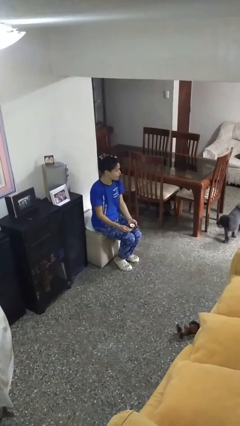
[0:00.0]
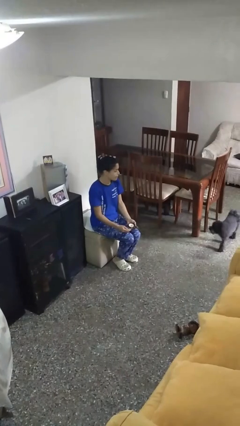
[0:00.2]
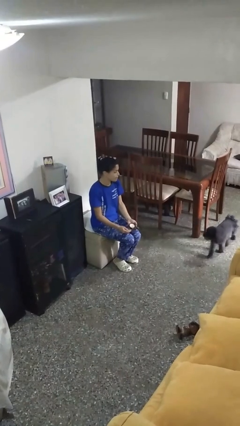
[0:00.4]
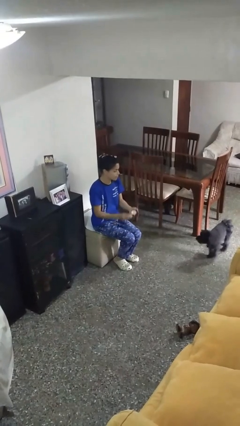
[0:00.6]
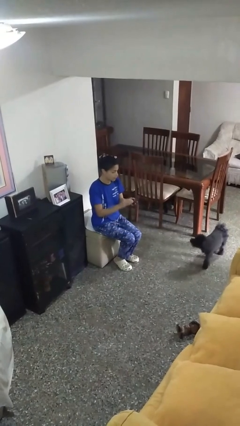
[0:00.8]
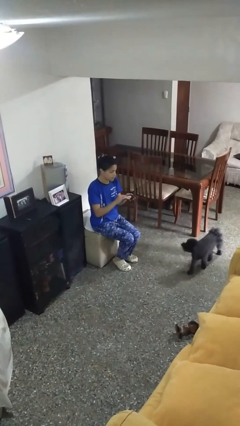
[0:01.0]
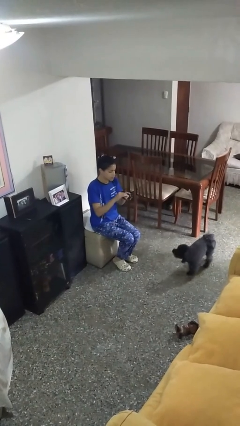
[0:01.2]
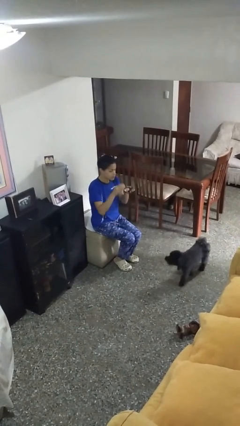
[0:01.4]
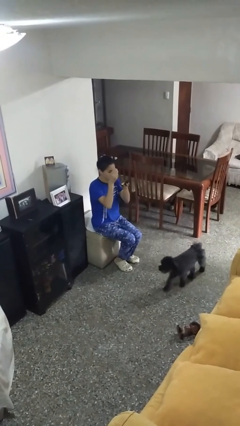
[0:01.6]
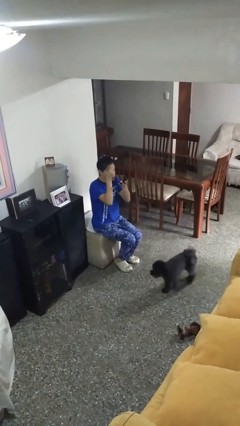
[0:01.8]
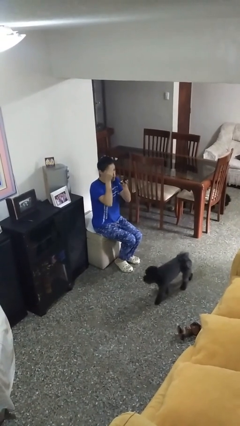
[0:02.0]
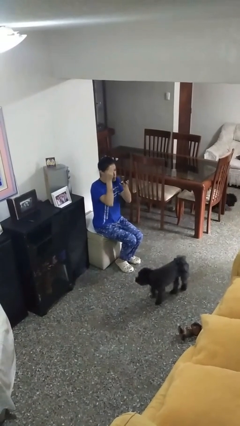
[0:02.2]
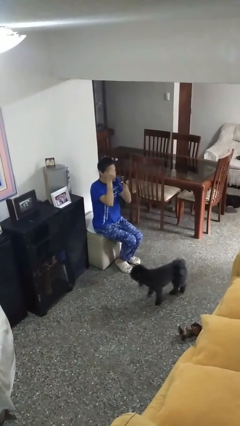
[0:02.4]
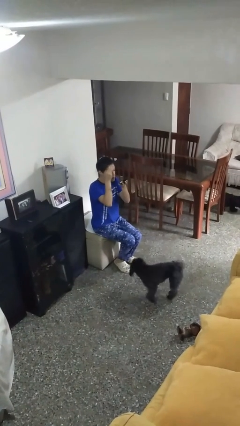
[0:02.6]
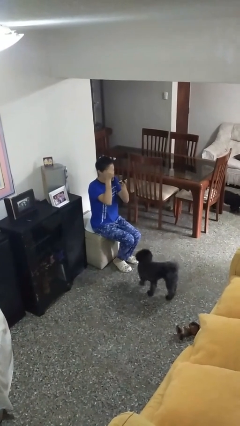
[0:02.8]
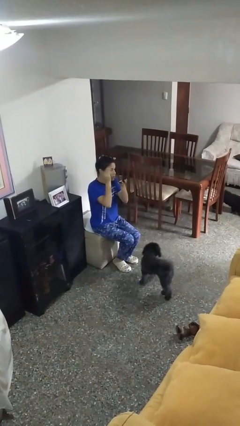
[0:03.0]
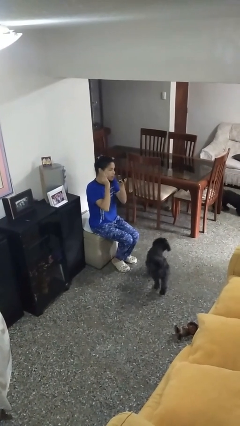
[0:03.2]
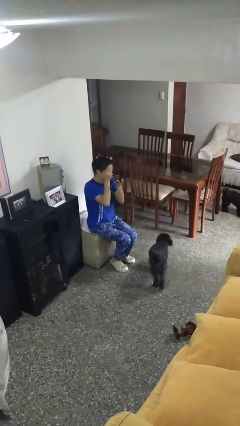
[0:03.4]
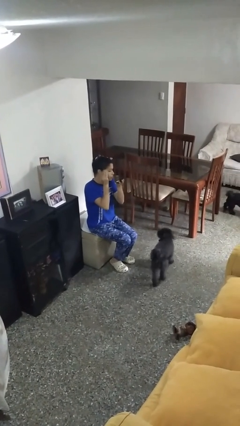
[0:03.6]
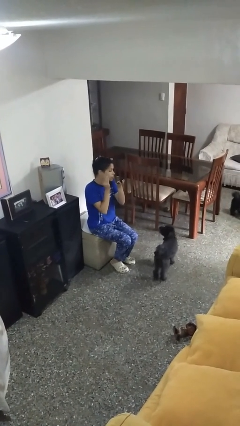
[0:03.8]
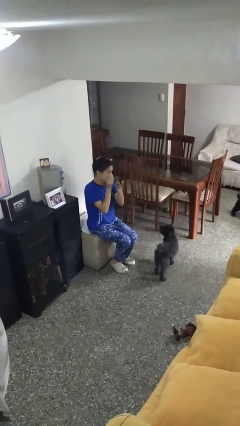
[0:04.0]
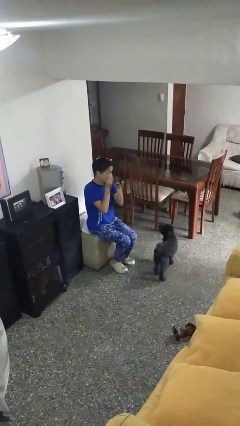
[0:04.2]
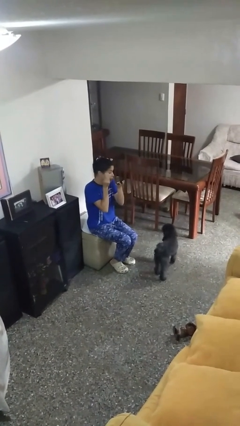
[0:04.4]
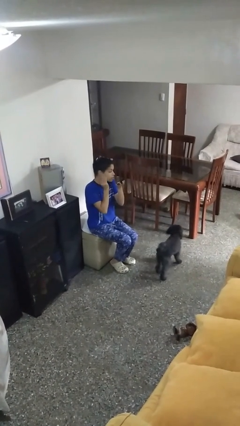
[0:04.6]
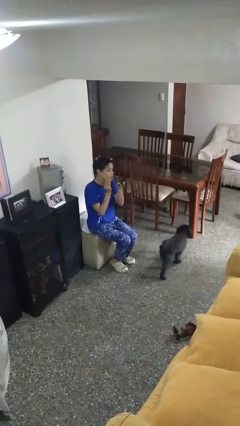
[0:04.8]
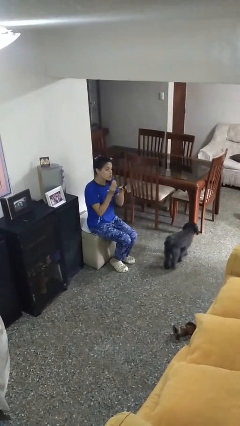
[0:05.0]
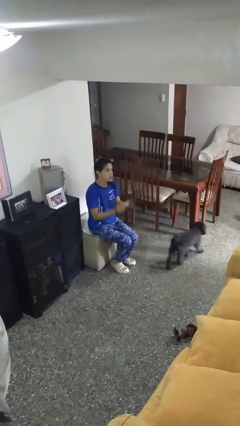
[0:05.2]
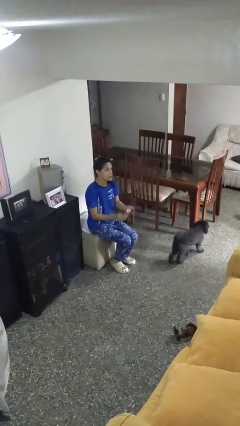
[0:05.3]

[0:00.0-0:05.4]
person applies foundation makeup

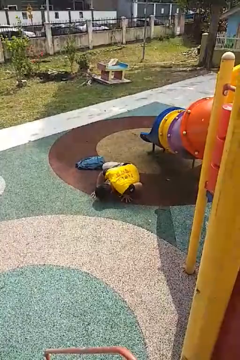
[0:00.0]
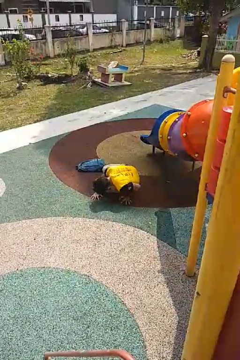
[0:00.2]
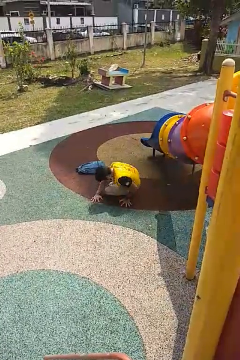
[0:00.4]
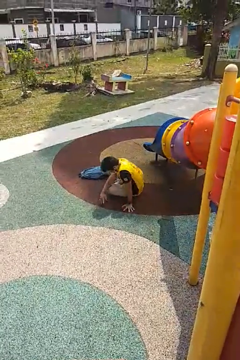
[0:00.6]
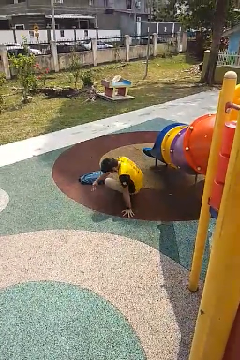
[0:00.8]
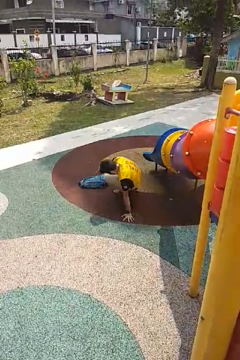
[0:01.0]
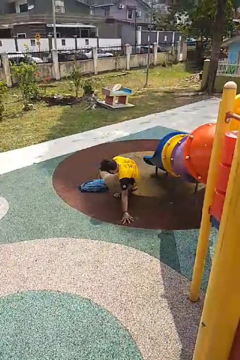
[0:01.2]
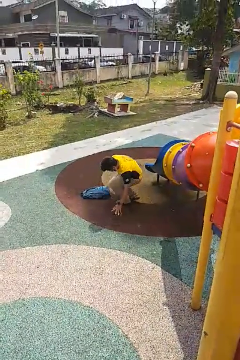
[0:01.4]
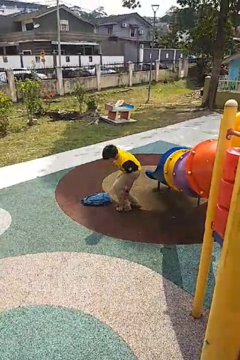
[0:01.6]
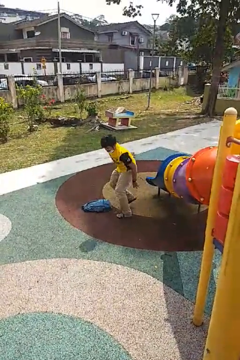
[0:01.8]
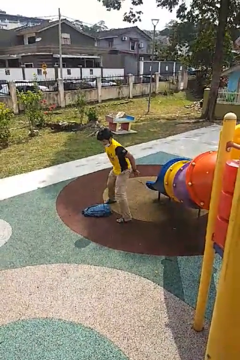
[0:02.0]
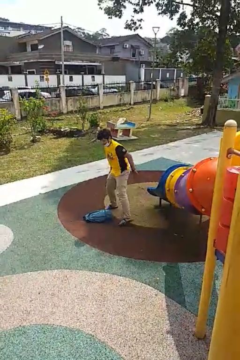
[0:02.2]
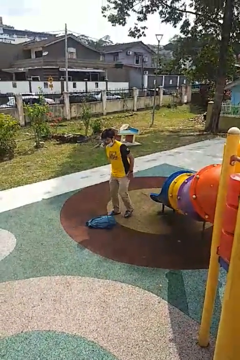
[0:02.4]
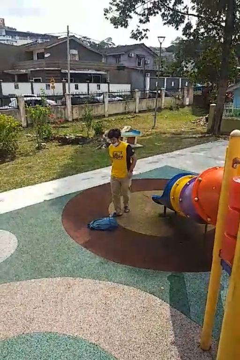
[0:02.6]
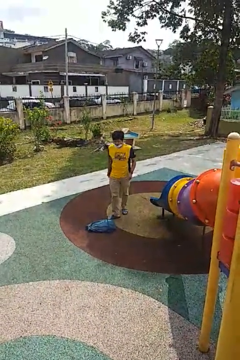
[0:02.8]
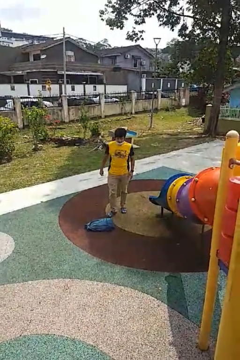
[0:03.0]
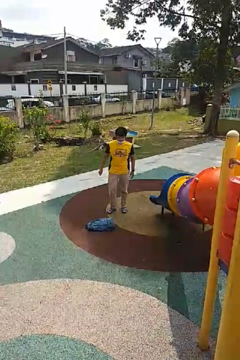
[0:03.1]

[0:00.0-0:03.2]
person stands up from floor

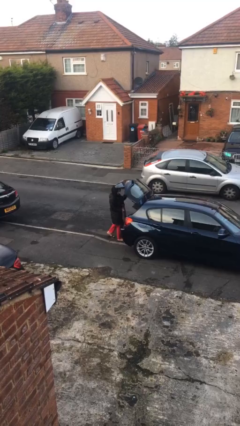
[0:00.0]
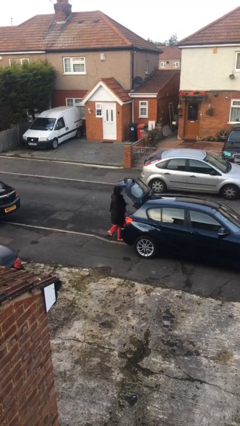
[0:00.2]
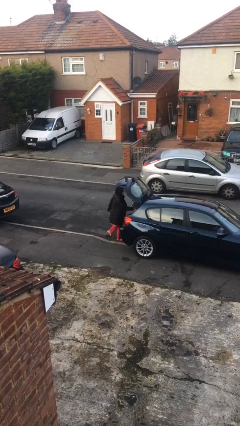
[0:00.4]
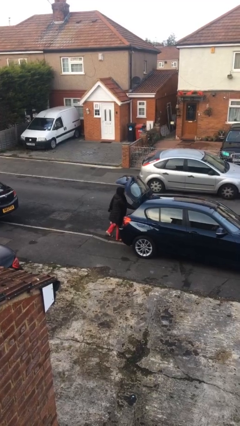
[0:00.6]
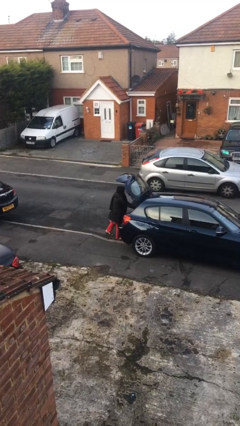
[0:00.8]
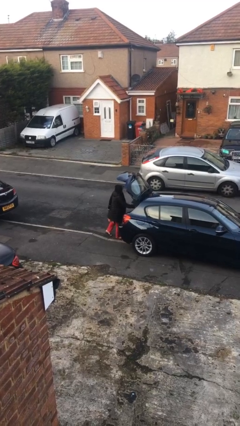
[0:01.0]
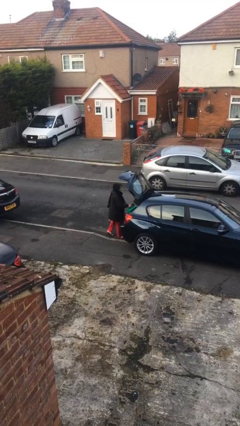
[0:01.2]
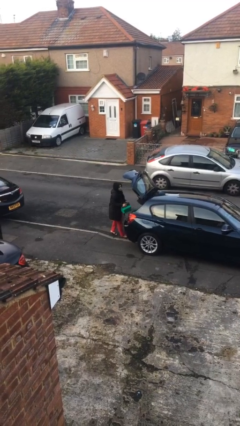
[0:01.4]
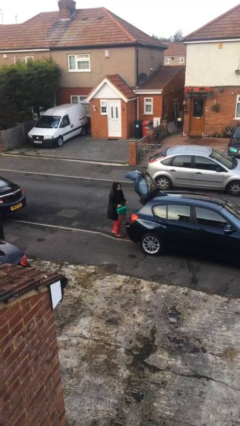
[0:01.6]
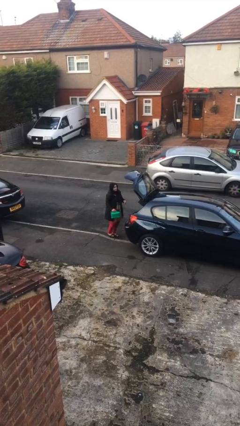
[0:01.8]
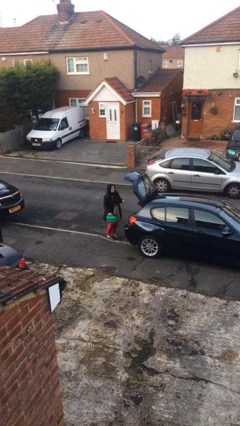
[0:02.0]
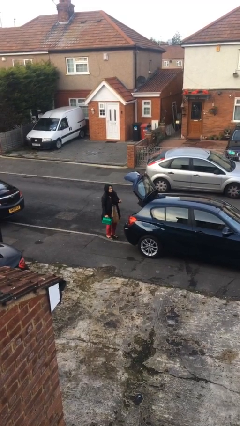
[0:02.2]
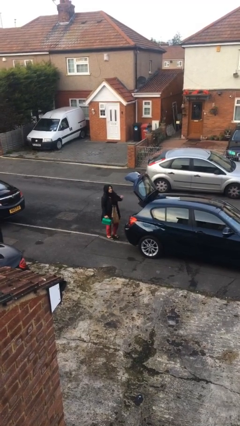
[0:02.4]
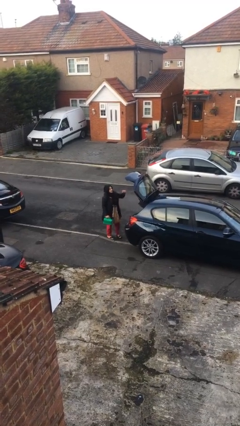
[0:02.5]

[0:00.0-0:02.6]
person unloads car

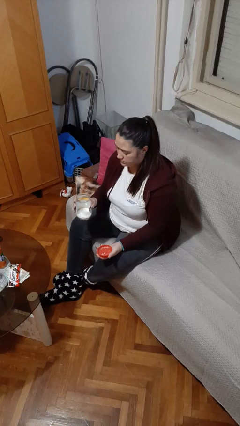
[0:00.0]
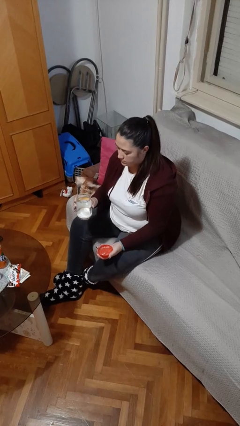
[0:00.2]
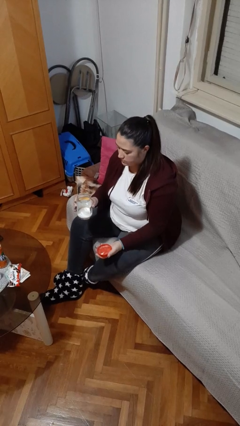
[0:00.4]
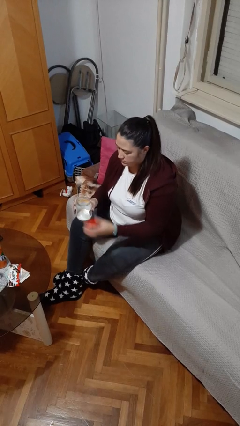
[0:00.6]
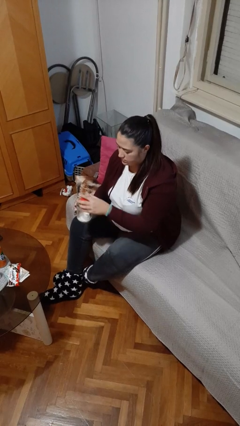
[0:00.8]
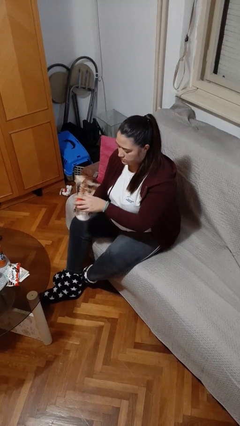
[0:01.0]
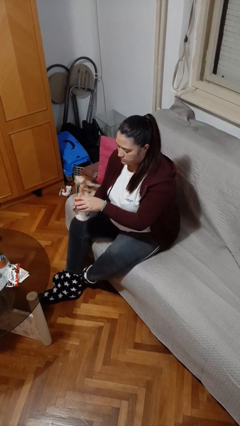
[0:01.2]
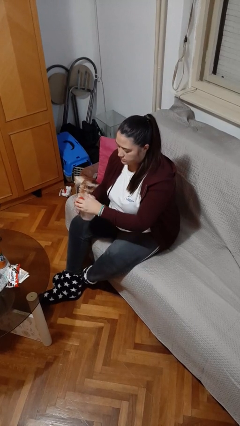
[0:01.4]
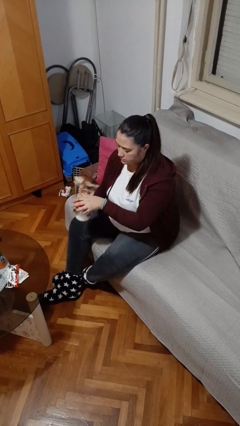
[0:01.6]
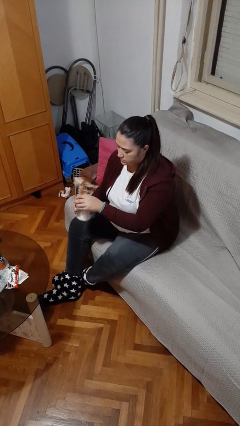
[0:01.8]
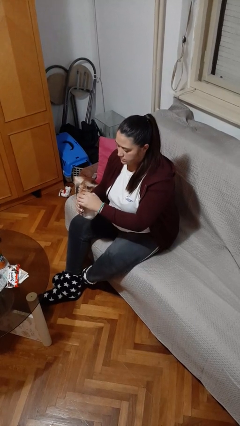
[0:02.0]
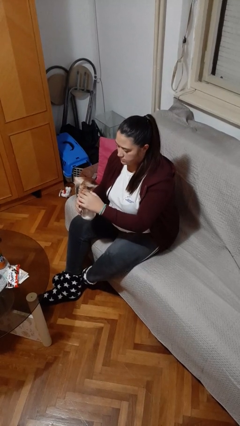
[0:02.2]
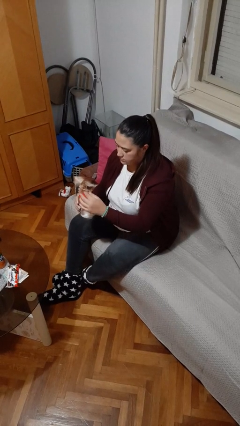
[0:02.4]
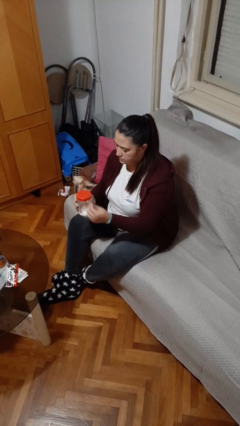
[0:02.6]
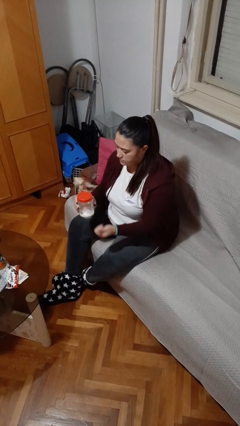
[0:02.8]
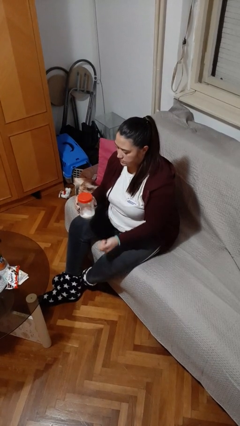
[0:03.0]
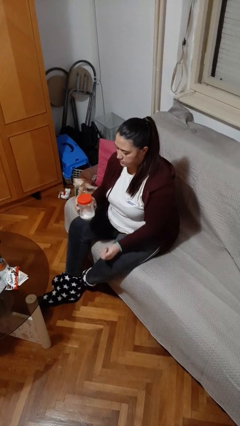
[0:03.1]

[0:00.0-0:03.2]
person closes jar

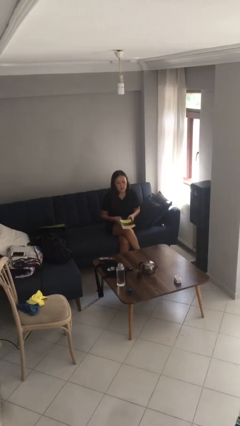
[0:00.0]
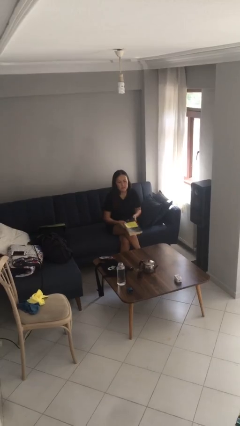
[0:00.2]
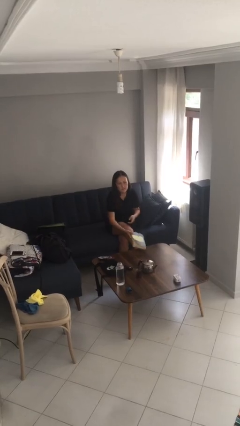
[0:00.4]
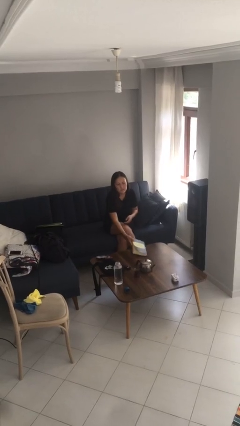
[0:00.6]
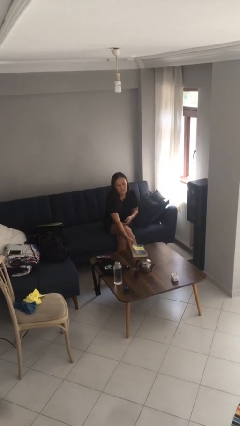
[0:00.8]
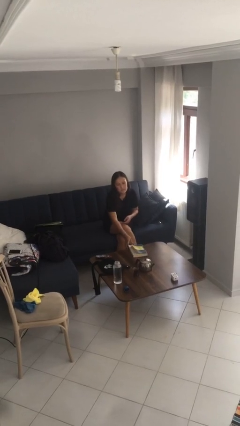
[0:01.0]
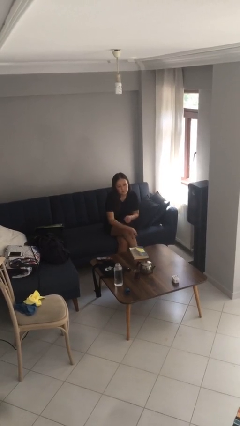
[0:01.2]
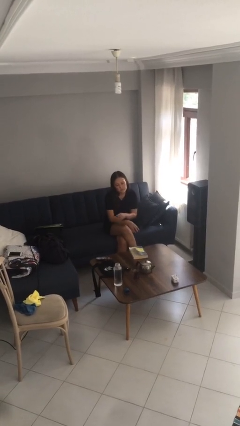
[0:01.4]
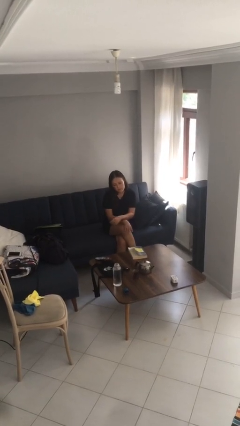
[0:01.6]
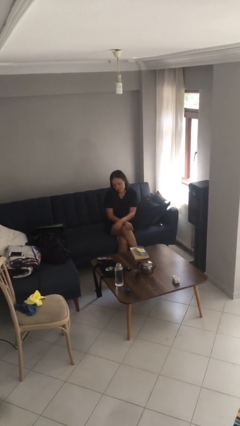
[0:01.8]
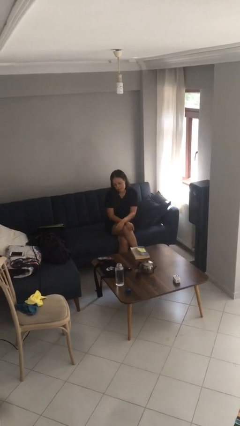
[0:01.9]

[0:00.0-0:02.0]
person puts down object on table

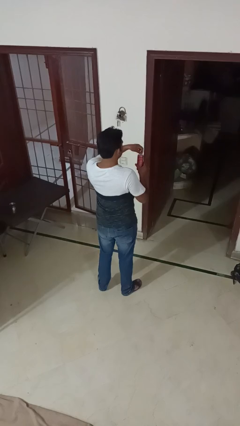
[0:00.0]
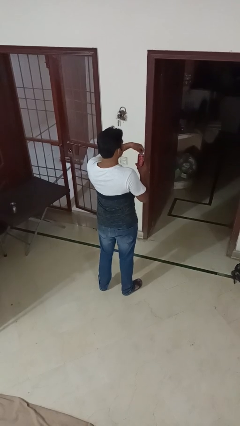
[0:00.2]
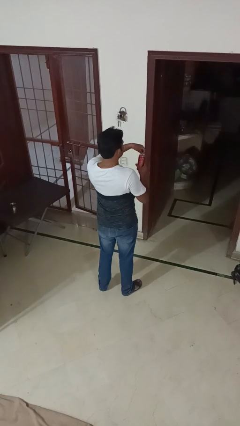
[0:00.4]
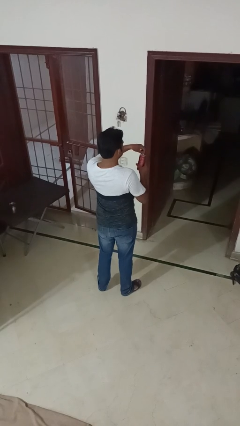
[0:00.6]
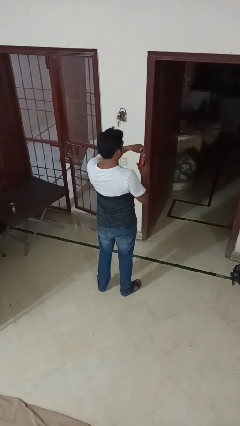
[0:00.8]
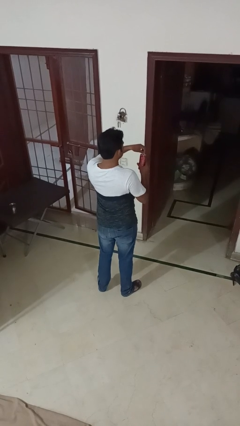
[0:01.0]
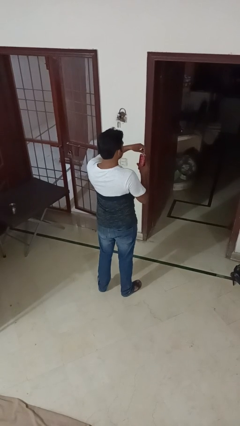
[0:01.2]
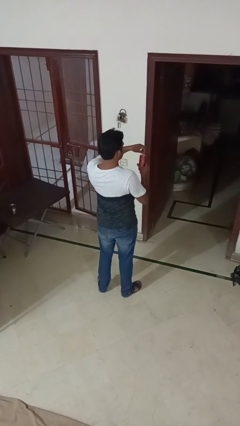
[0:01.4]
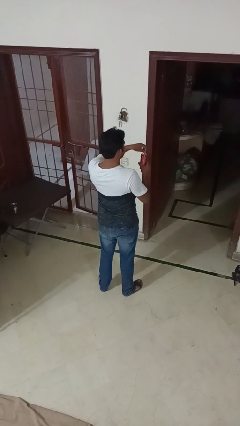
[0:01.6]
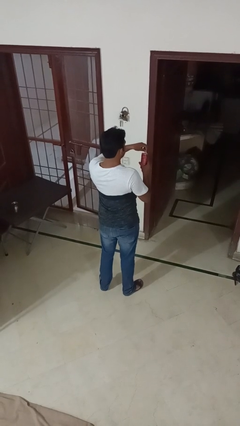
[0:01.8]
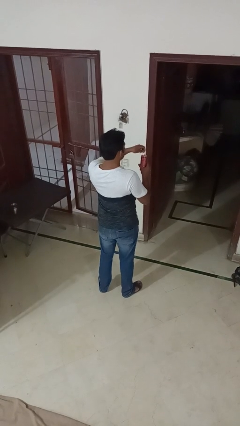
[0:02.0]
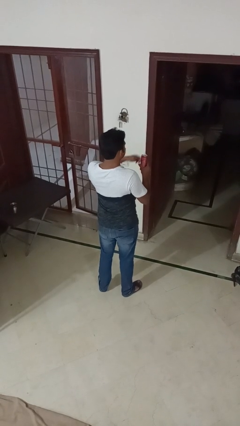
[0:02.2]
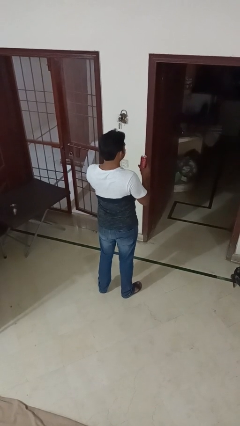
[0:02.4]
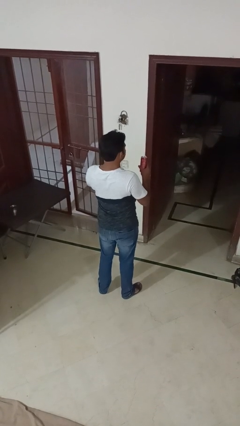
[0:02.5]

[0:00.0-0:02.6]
person opens beverage can
